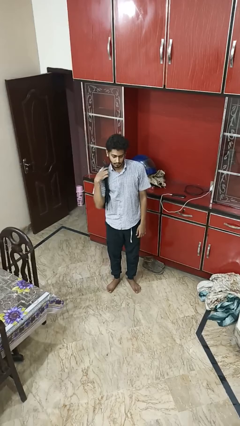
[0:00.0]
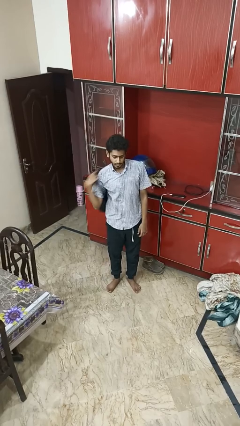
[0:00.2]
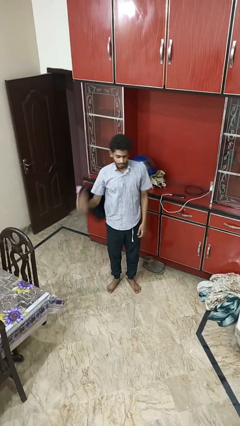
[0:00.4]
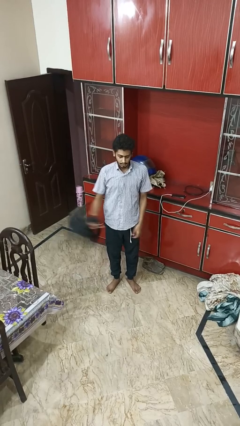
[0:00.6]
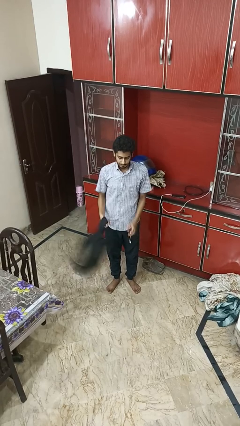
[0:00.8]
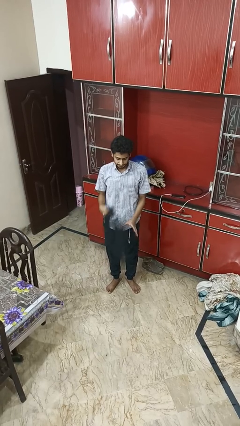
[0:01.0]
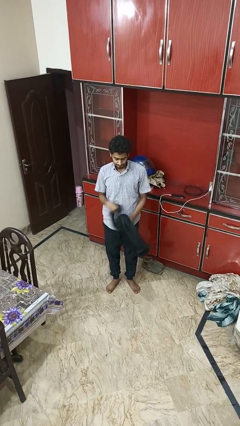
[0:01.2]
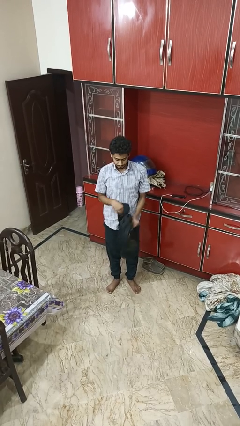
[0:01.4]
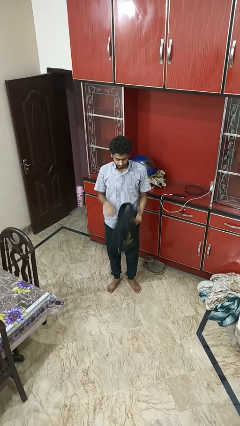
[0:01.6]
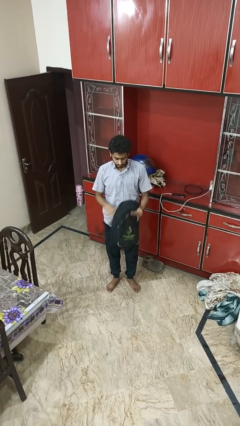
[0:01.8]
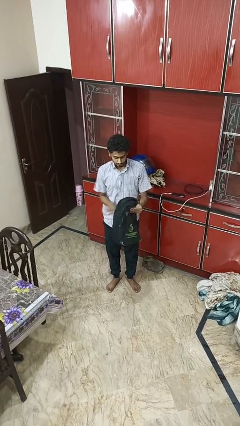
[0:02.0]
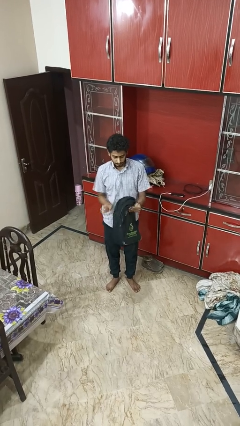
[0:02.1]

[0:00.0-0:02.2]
person takes off backpack

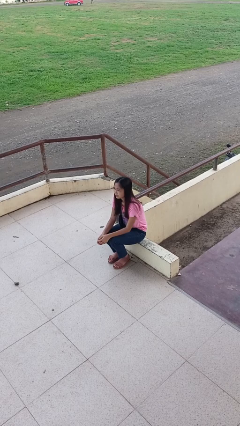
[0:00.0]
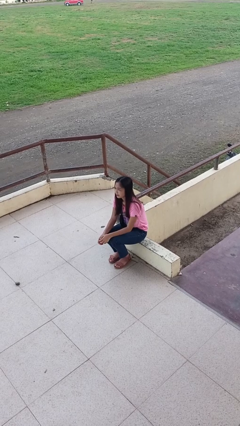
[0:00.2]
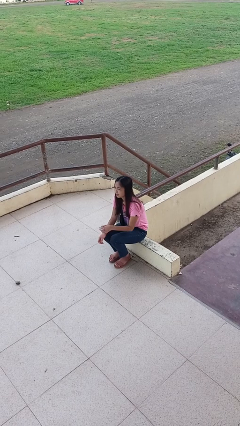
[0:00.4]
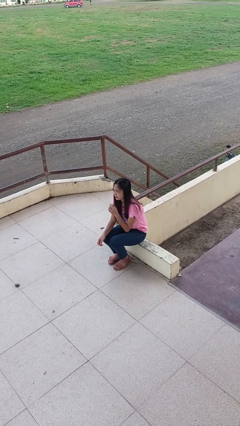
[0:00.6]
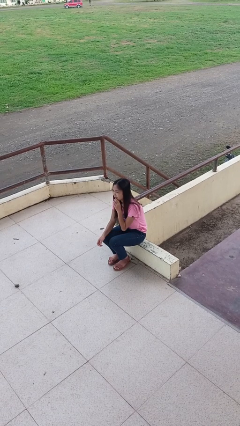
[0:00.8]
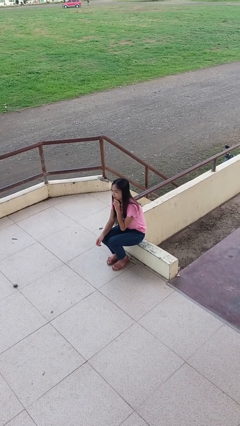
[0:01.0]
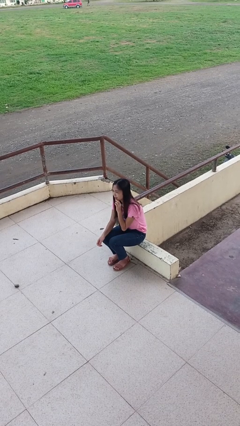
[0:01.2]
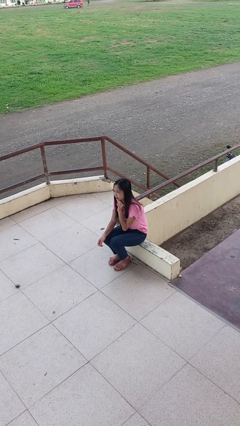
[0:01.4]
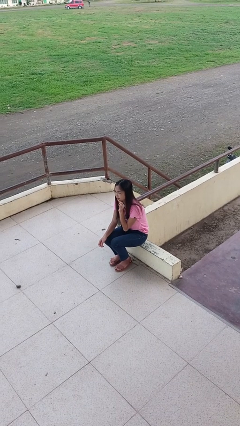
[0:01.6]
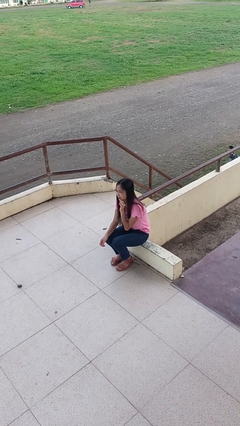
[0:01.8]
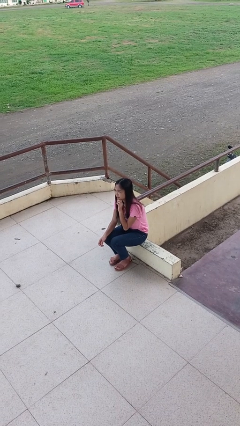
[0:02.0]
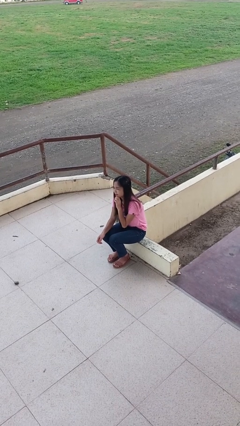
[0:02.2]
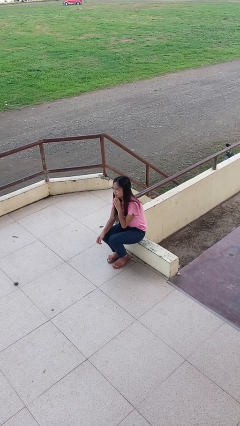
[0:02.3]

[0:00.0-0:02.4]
person strokes chin

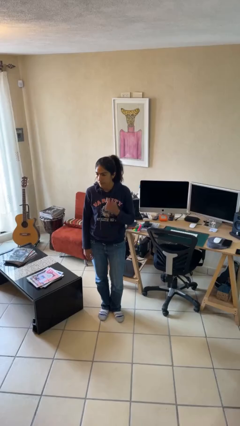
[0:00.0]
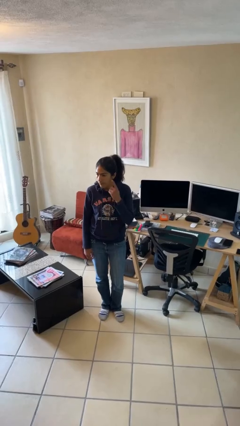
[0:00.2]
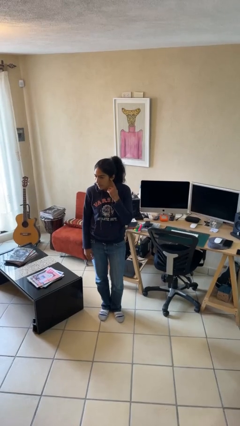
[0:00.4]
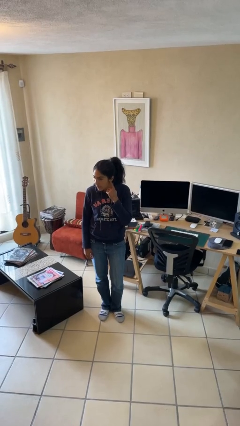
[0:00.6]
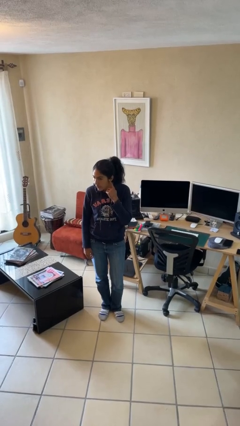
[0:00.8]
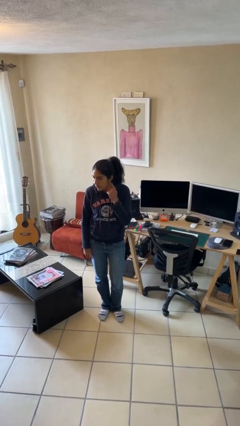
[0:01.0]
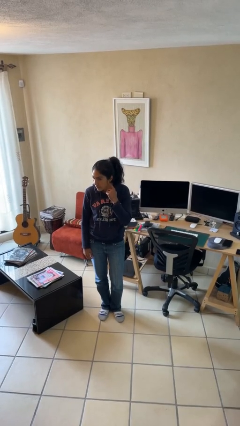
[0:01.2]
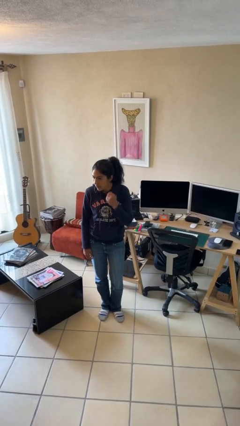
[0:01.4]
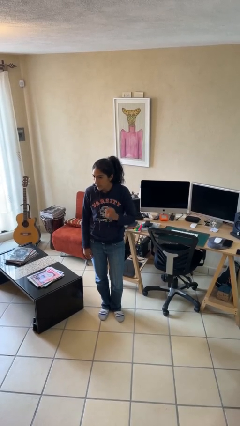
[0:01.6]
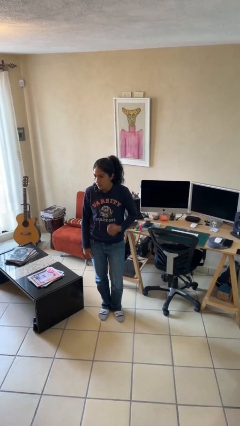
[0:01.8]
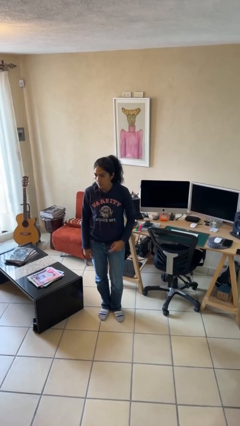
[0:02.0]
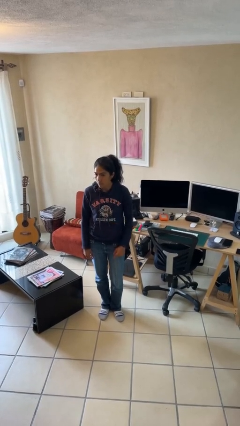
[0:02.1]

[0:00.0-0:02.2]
person gestures listen closely

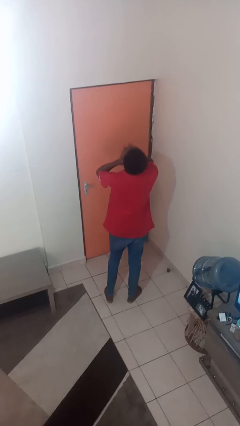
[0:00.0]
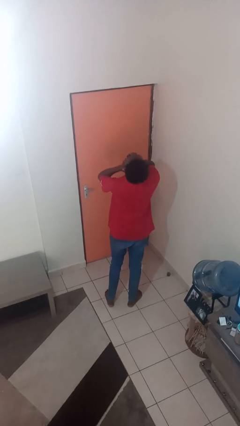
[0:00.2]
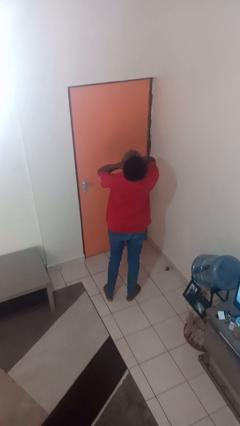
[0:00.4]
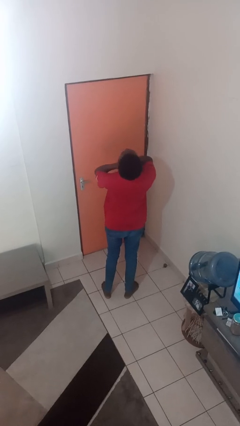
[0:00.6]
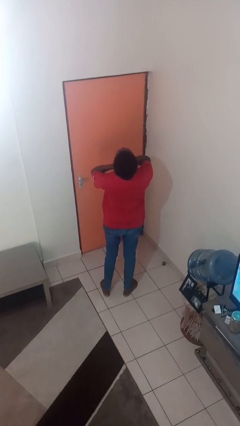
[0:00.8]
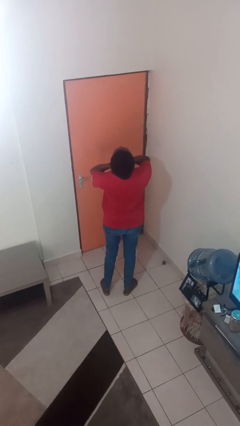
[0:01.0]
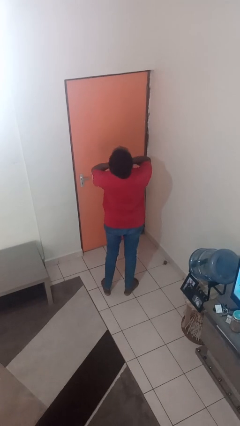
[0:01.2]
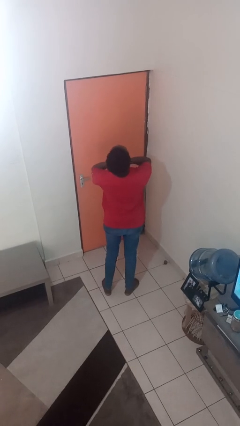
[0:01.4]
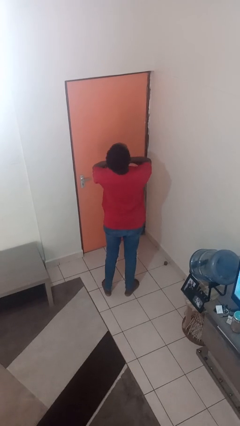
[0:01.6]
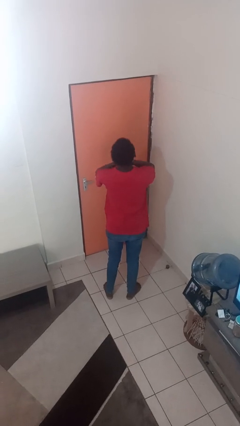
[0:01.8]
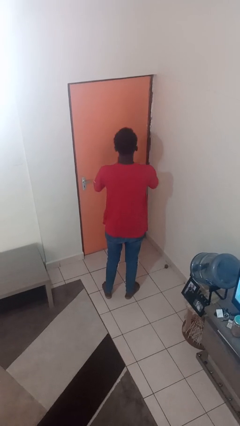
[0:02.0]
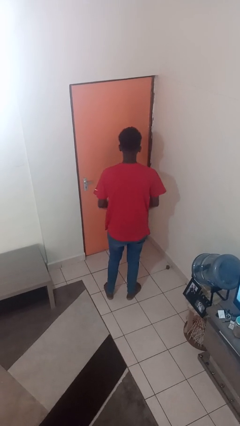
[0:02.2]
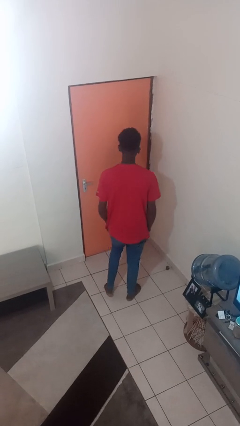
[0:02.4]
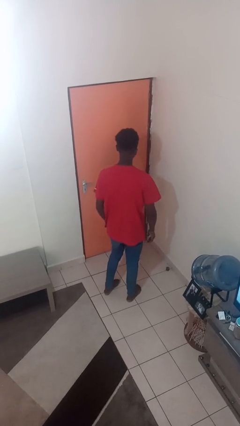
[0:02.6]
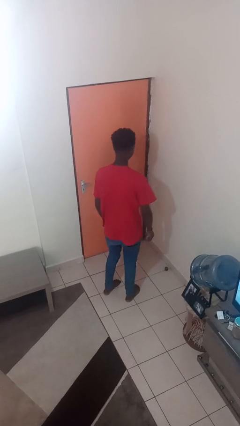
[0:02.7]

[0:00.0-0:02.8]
person yawns

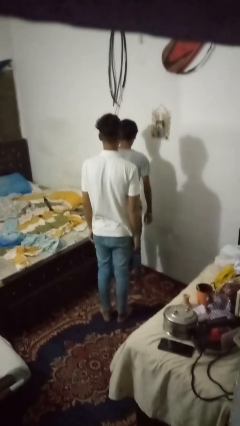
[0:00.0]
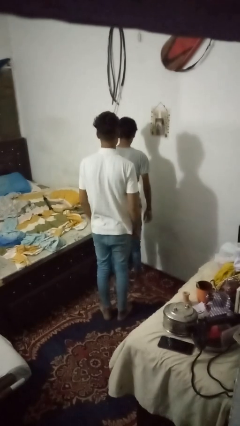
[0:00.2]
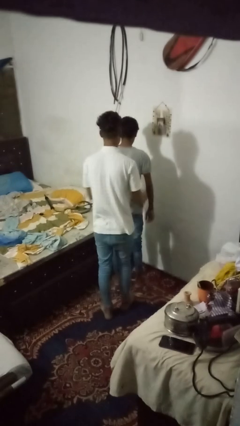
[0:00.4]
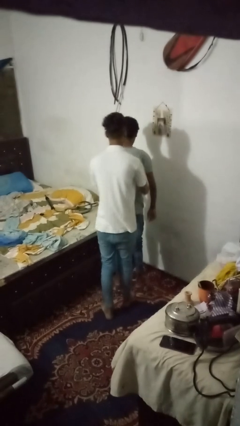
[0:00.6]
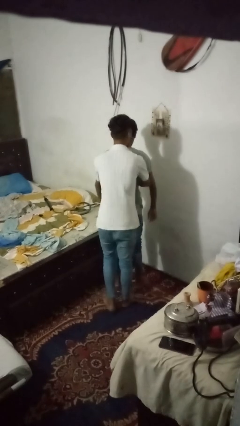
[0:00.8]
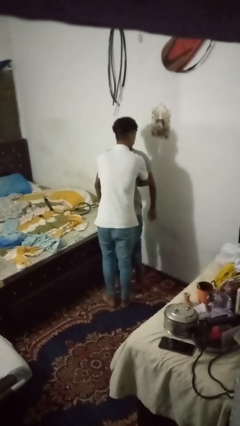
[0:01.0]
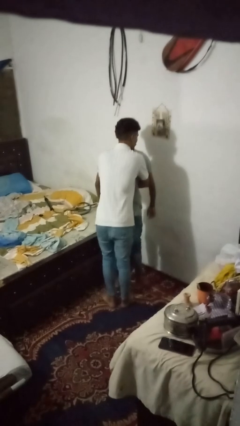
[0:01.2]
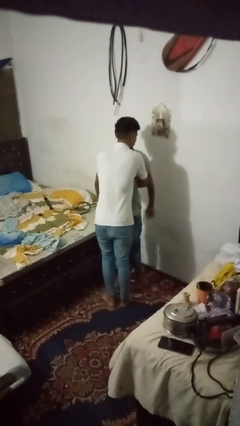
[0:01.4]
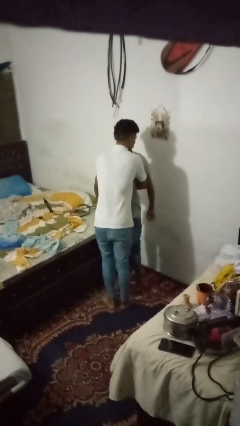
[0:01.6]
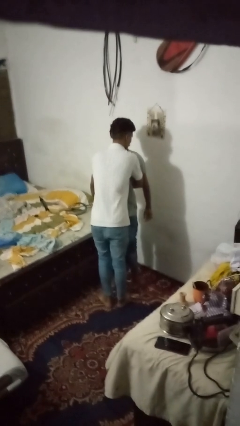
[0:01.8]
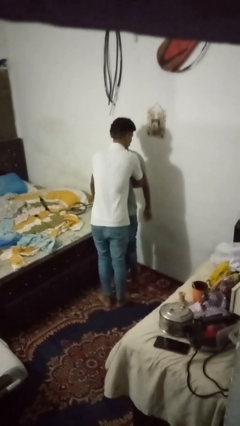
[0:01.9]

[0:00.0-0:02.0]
person hugs person from behind

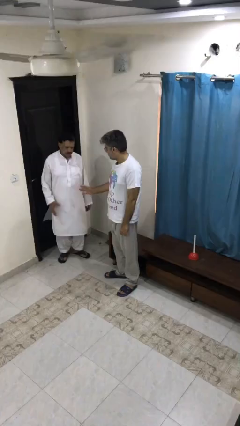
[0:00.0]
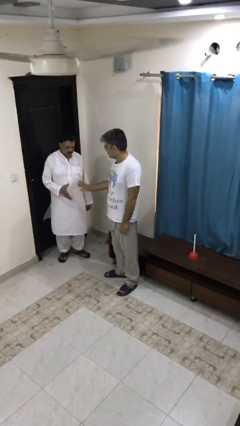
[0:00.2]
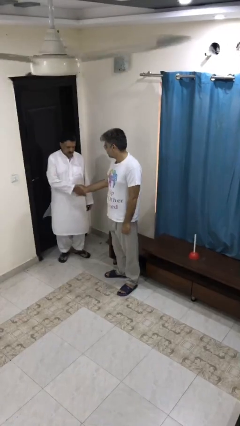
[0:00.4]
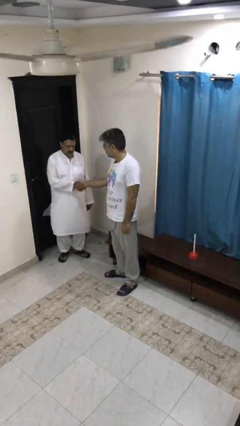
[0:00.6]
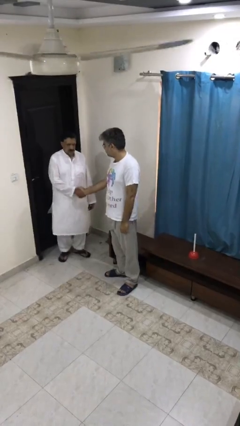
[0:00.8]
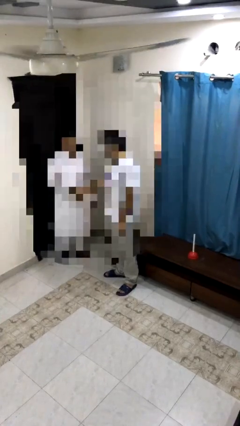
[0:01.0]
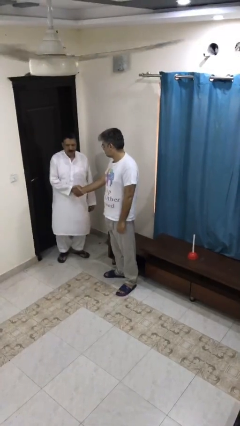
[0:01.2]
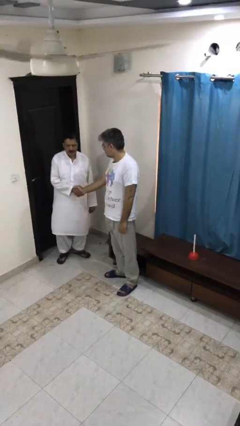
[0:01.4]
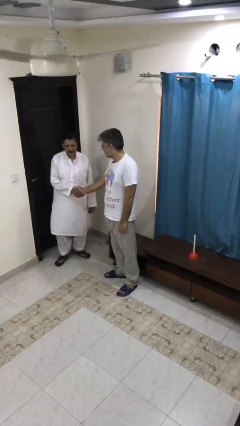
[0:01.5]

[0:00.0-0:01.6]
person shakes hand

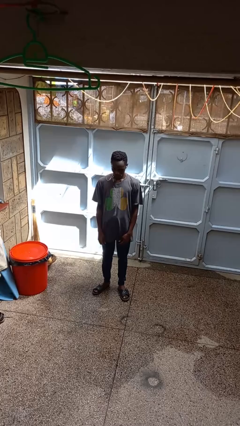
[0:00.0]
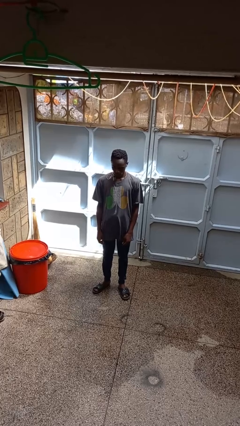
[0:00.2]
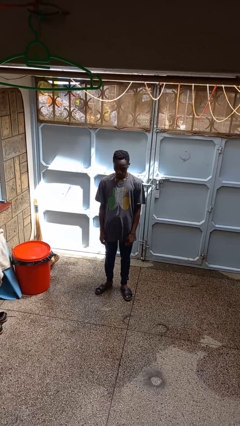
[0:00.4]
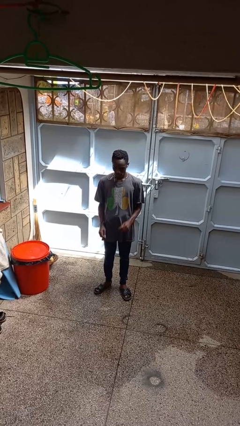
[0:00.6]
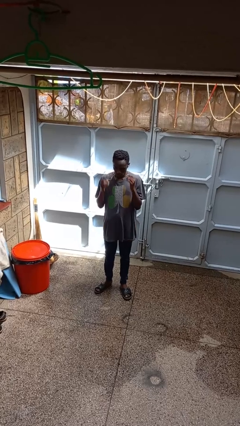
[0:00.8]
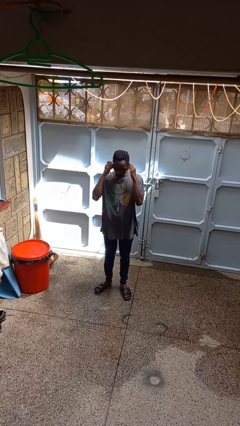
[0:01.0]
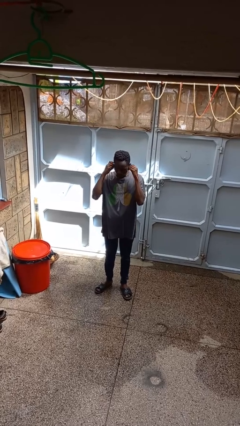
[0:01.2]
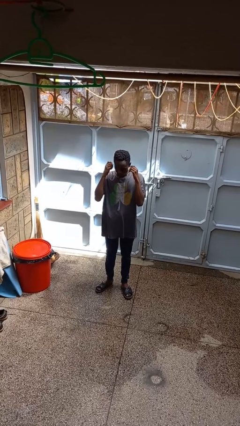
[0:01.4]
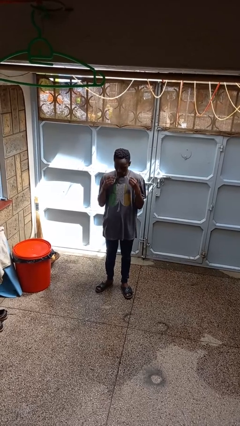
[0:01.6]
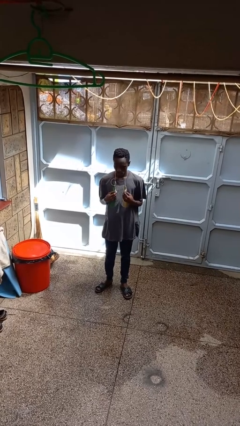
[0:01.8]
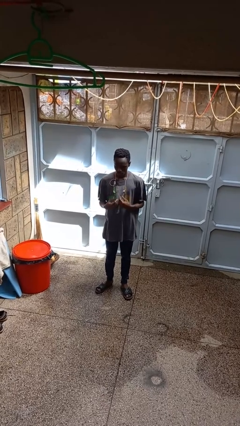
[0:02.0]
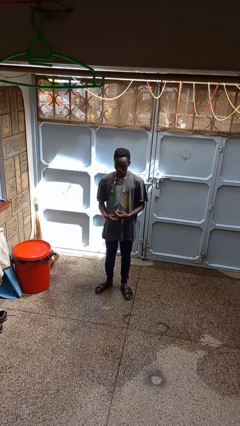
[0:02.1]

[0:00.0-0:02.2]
person takes off headphones

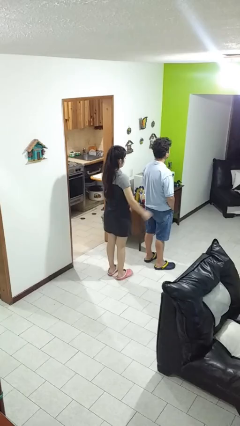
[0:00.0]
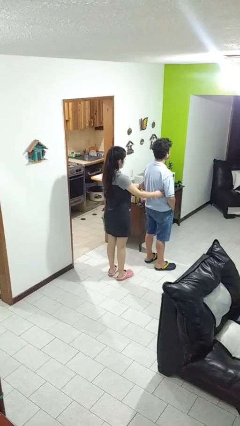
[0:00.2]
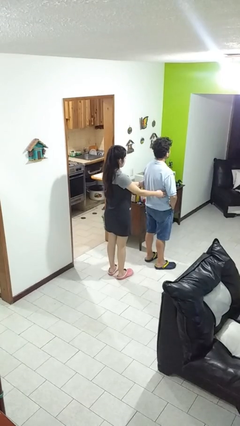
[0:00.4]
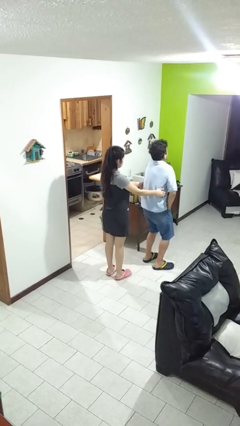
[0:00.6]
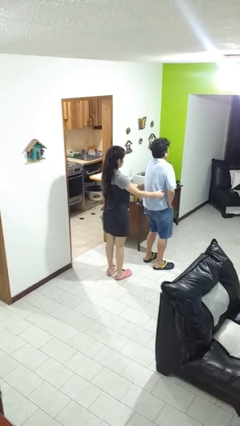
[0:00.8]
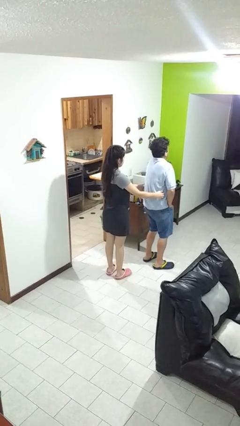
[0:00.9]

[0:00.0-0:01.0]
person tickles person

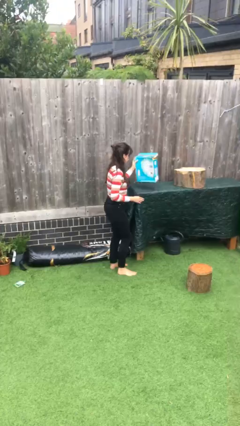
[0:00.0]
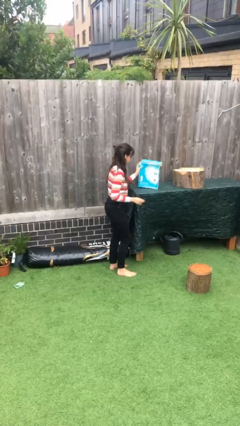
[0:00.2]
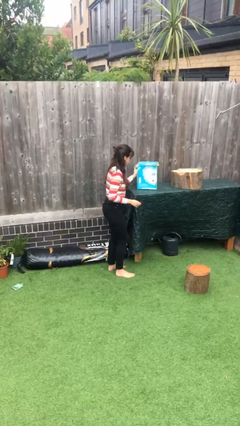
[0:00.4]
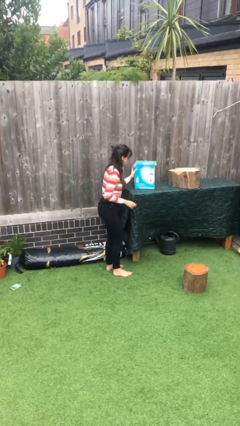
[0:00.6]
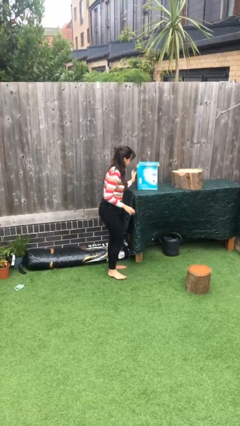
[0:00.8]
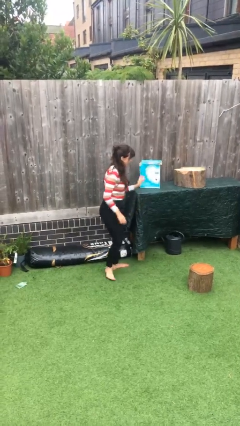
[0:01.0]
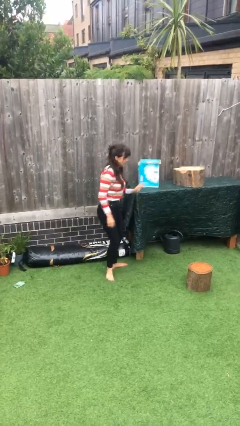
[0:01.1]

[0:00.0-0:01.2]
person puts down object on table
